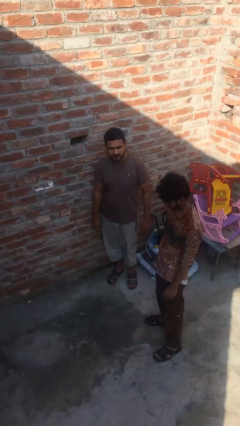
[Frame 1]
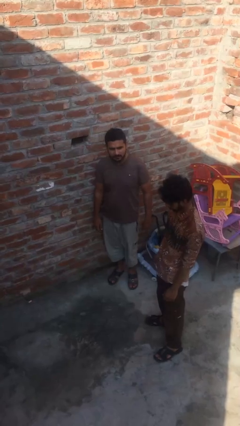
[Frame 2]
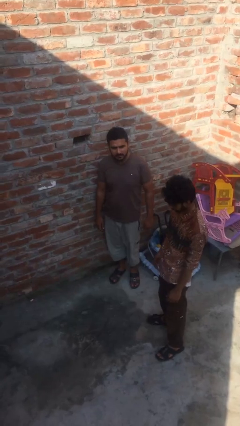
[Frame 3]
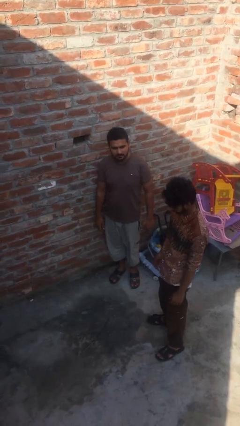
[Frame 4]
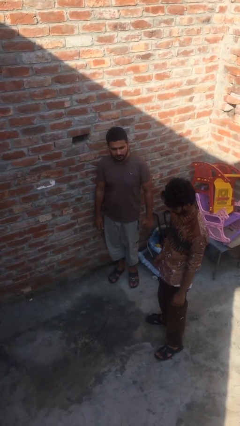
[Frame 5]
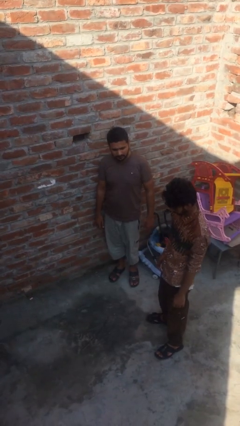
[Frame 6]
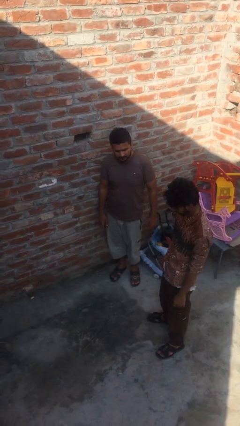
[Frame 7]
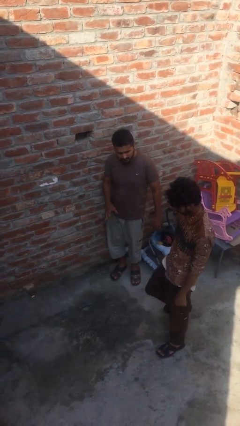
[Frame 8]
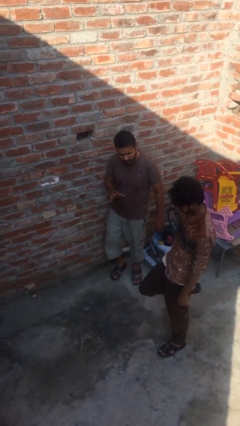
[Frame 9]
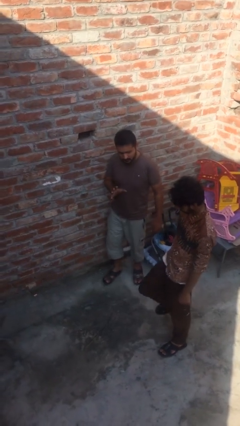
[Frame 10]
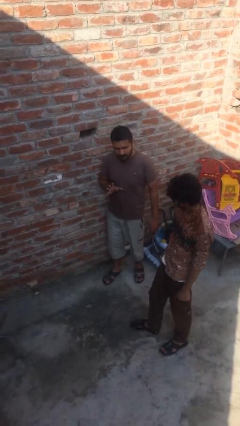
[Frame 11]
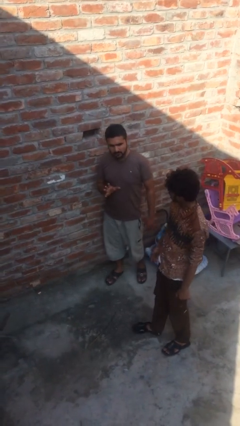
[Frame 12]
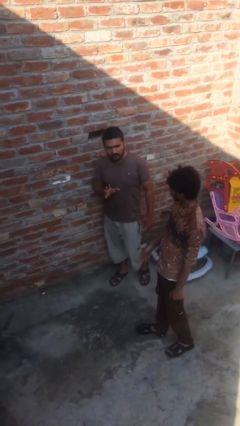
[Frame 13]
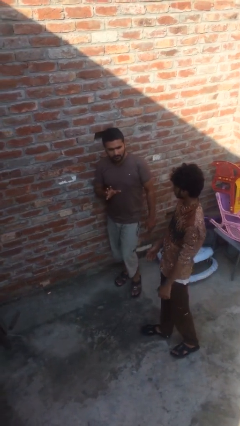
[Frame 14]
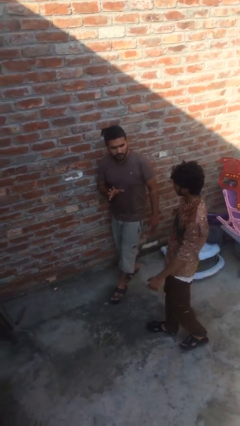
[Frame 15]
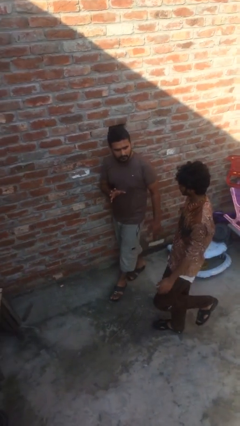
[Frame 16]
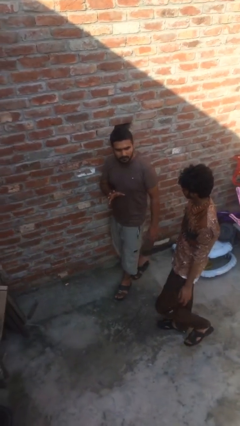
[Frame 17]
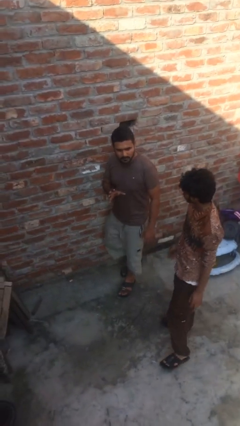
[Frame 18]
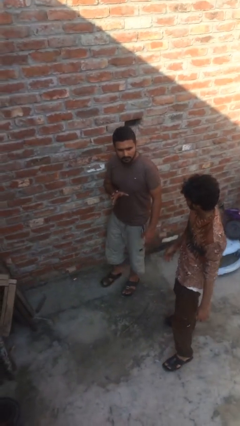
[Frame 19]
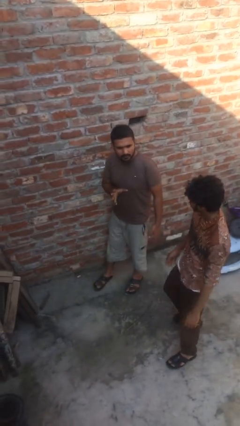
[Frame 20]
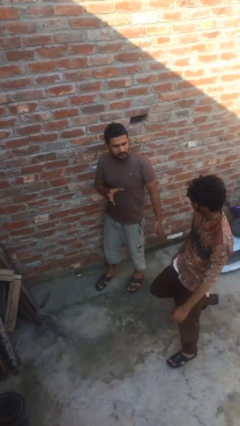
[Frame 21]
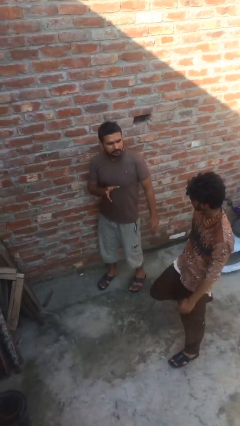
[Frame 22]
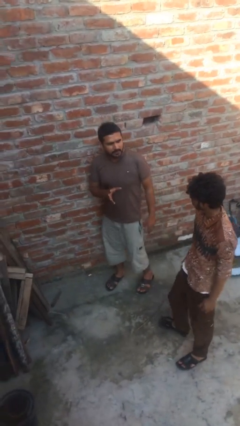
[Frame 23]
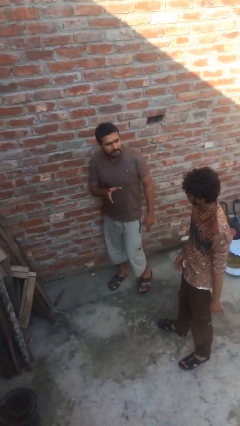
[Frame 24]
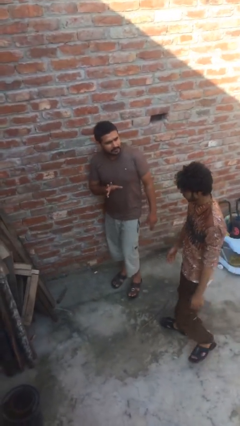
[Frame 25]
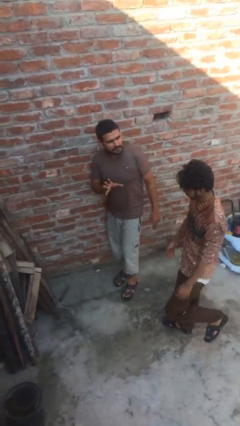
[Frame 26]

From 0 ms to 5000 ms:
person talks to person

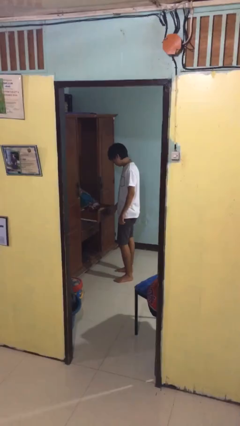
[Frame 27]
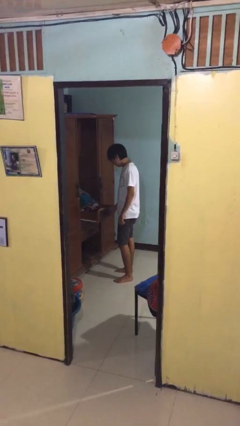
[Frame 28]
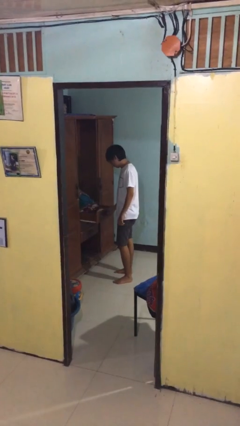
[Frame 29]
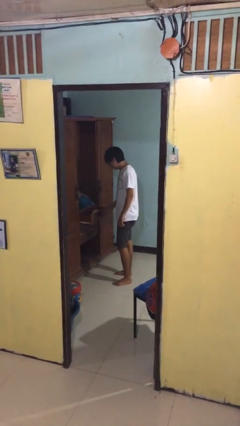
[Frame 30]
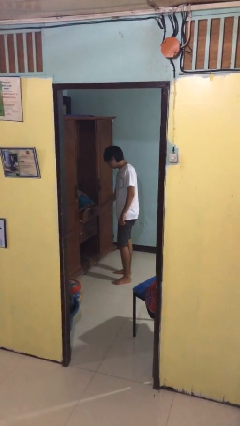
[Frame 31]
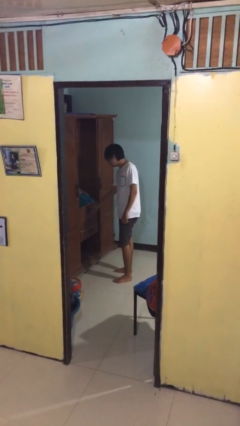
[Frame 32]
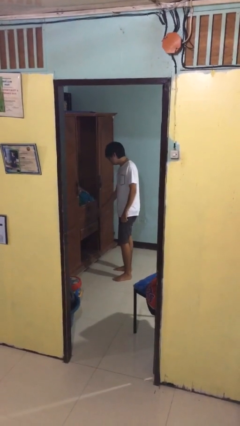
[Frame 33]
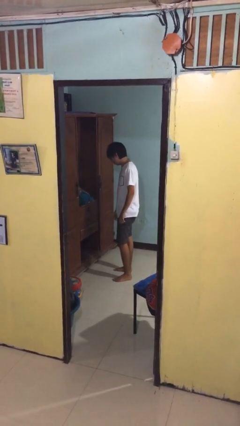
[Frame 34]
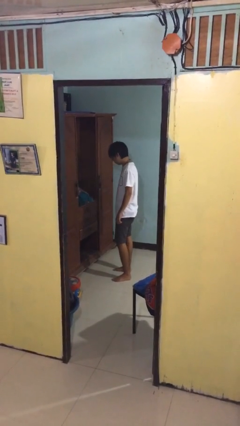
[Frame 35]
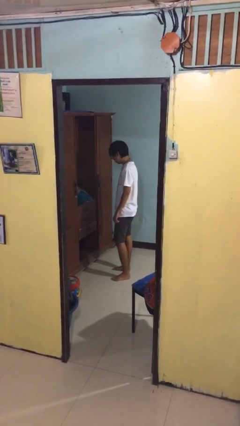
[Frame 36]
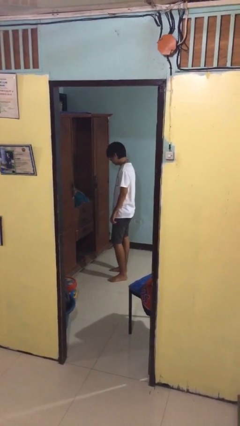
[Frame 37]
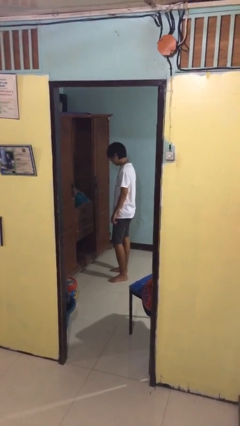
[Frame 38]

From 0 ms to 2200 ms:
person closes dresser drawer

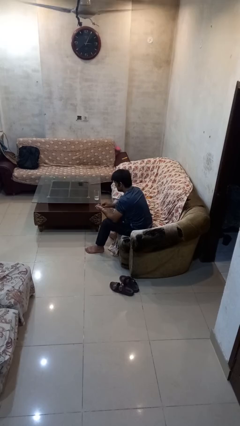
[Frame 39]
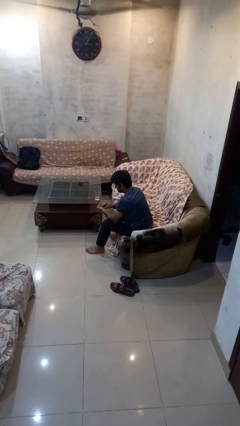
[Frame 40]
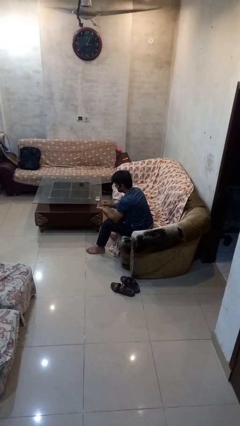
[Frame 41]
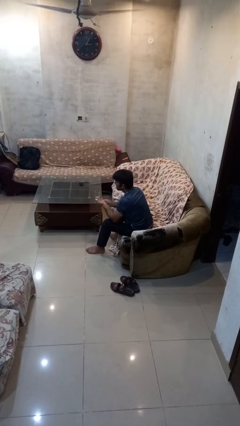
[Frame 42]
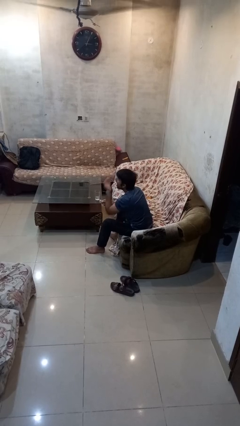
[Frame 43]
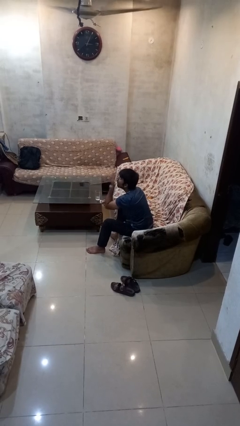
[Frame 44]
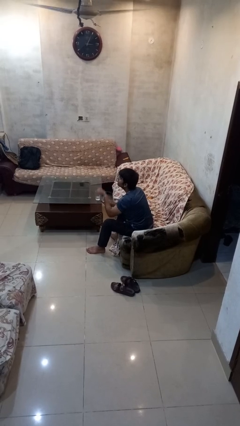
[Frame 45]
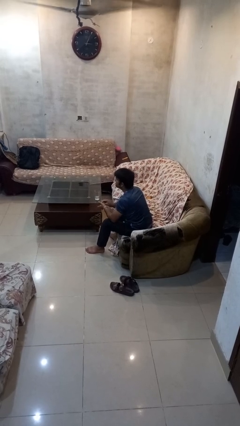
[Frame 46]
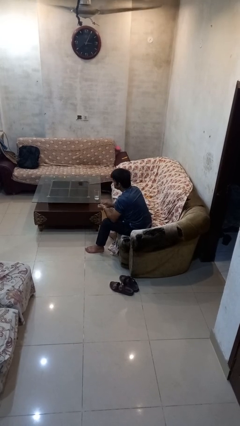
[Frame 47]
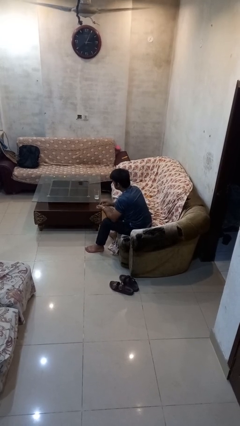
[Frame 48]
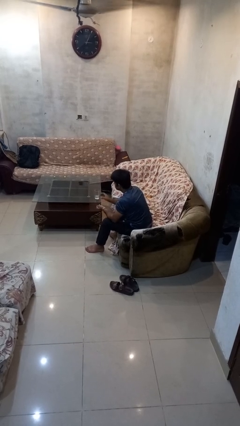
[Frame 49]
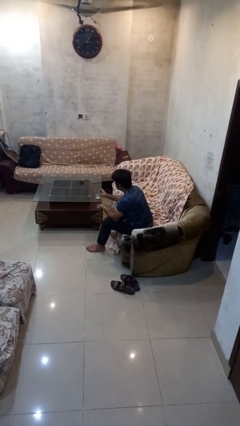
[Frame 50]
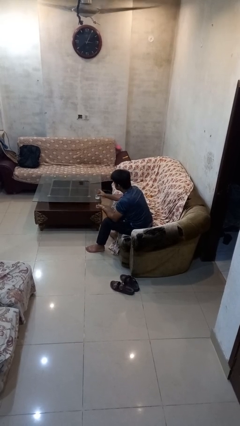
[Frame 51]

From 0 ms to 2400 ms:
person takes medicine pills

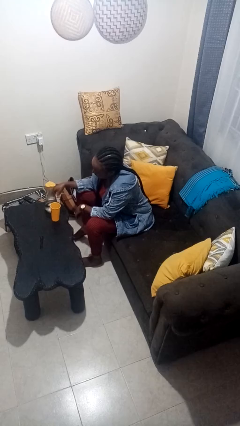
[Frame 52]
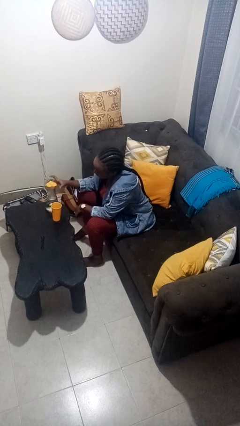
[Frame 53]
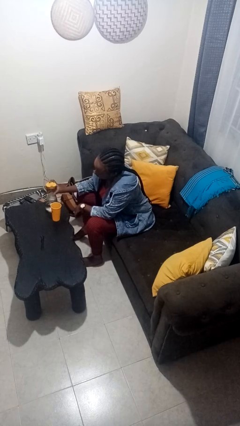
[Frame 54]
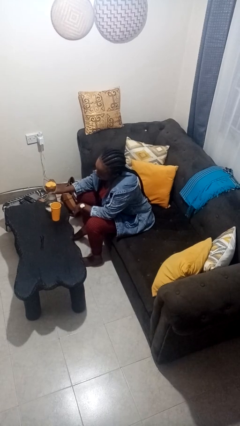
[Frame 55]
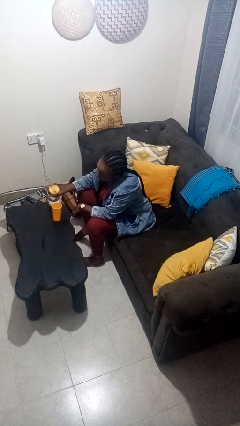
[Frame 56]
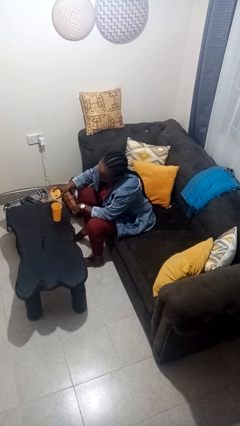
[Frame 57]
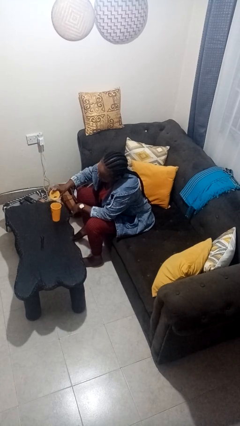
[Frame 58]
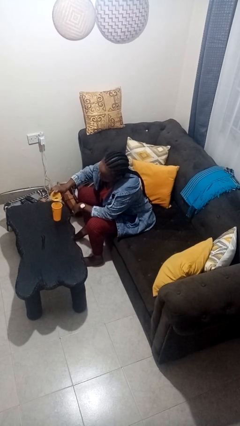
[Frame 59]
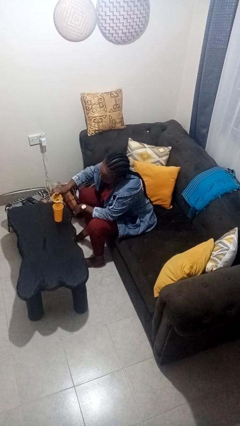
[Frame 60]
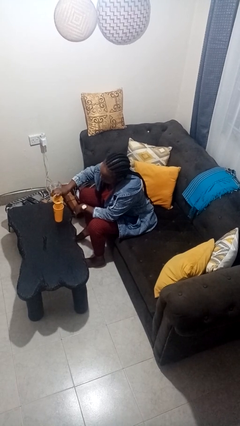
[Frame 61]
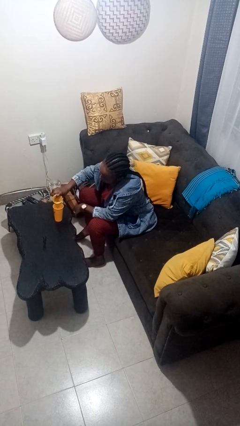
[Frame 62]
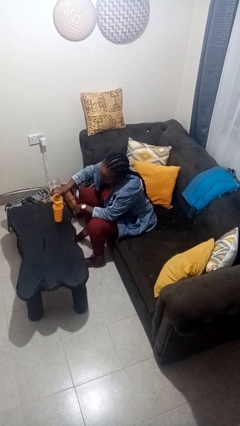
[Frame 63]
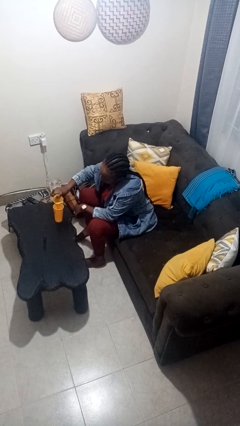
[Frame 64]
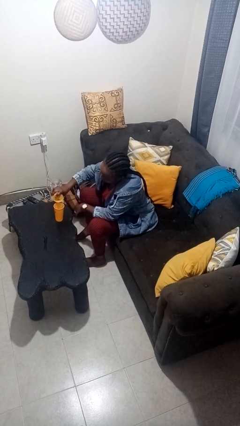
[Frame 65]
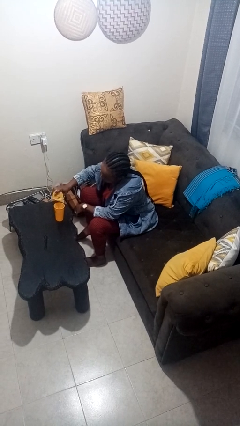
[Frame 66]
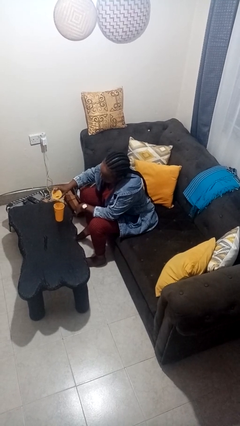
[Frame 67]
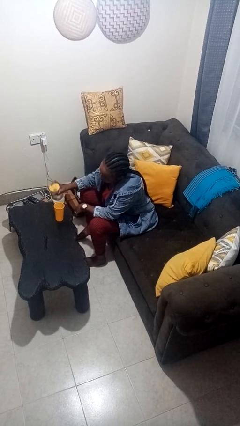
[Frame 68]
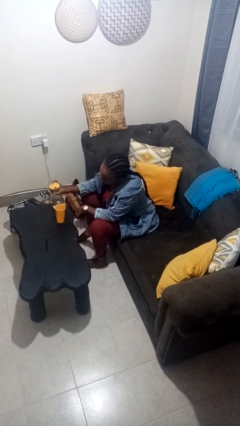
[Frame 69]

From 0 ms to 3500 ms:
person pours liquid into cup

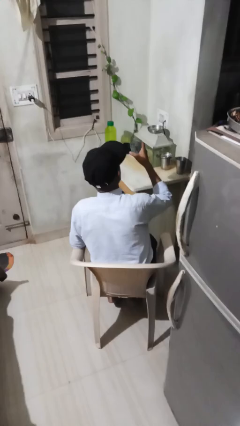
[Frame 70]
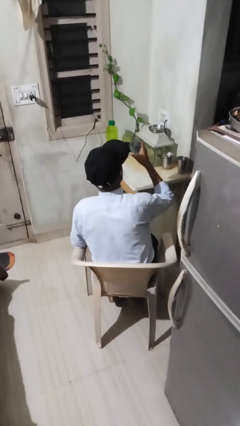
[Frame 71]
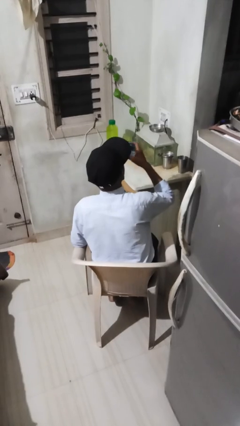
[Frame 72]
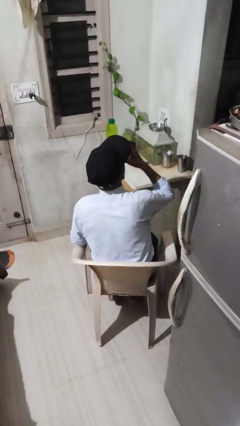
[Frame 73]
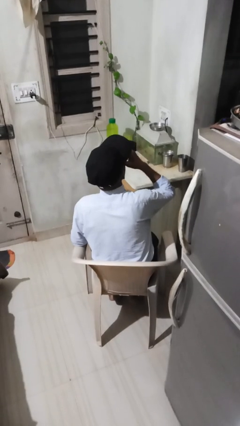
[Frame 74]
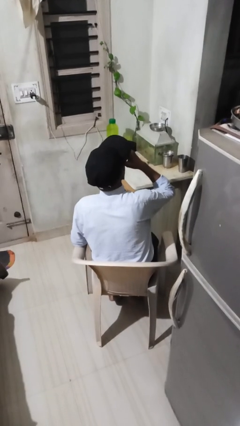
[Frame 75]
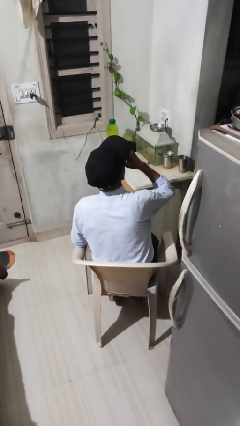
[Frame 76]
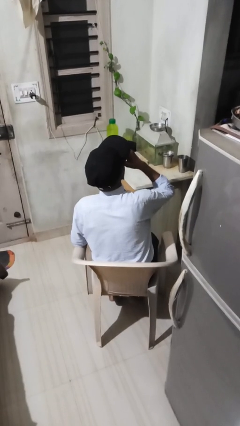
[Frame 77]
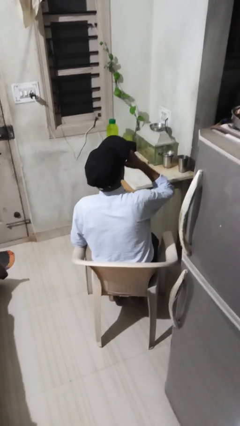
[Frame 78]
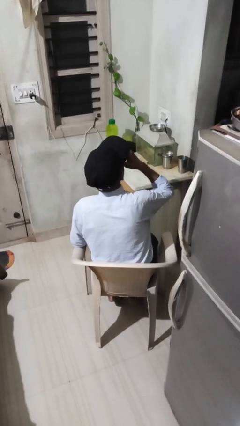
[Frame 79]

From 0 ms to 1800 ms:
person drinks from shotglass

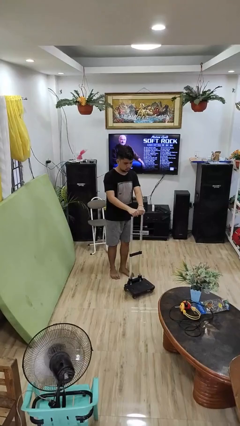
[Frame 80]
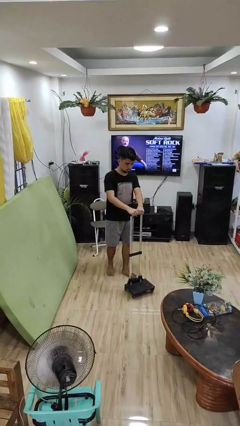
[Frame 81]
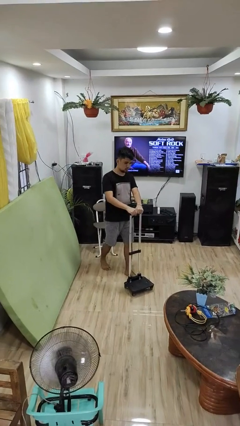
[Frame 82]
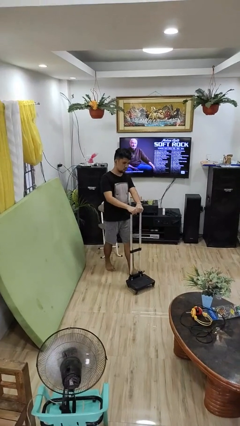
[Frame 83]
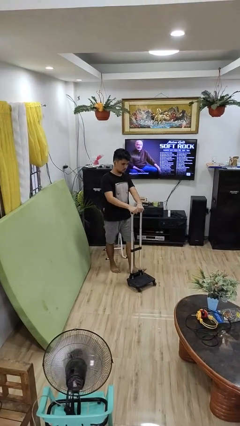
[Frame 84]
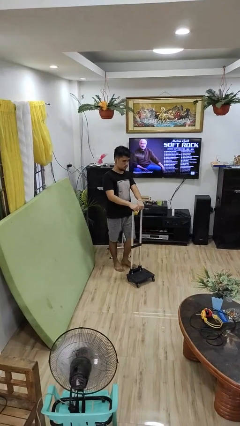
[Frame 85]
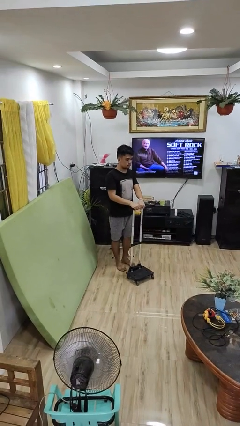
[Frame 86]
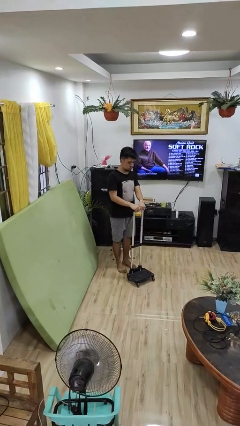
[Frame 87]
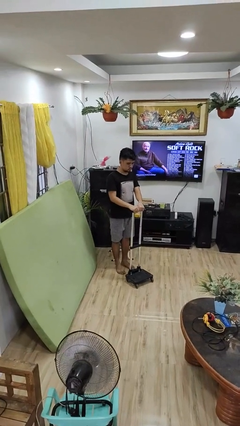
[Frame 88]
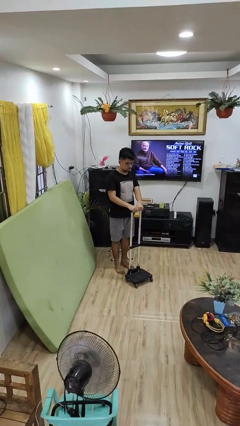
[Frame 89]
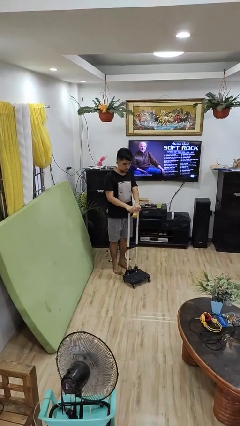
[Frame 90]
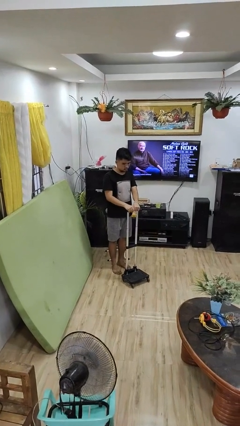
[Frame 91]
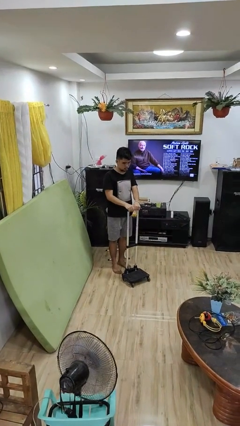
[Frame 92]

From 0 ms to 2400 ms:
person pulls wheeled cart
